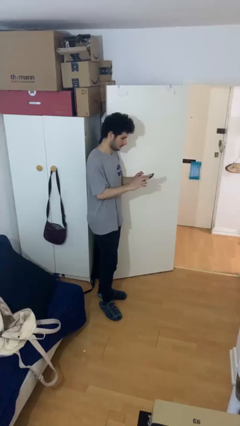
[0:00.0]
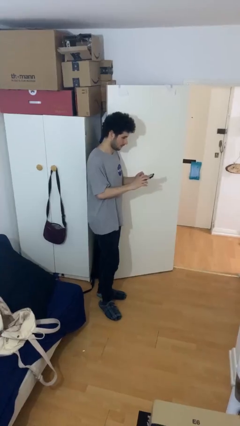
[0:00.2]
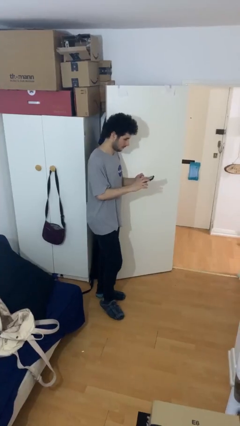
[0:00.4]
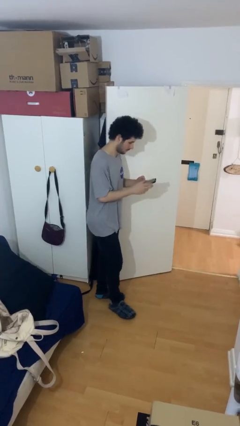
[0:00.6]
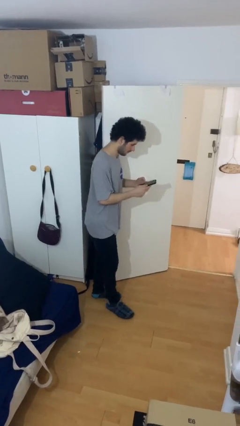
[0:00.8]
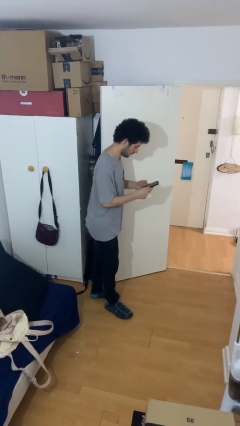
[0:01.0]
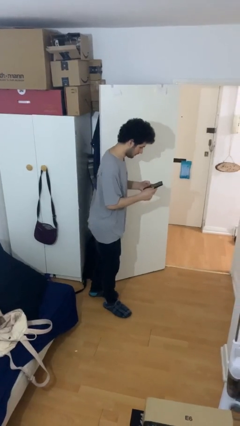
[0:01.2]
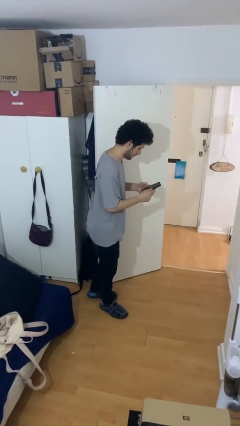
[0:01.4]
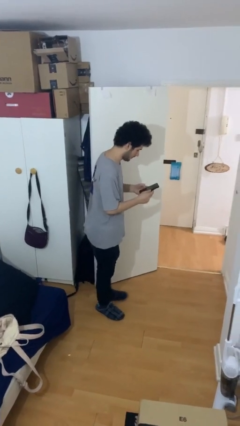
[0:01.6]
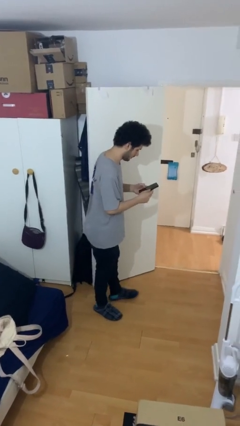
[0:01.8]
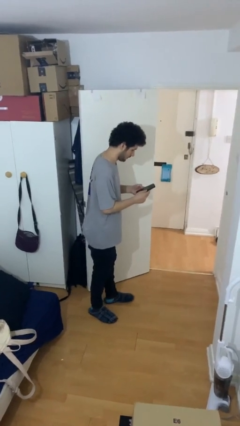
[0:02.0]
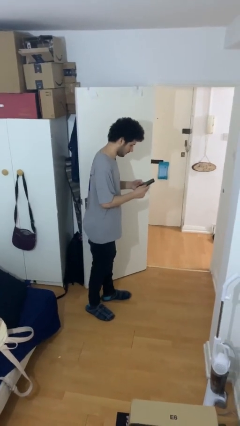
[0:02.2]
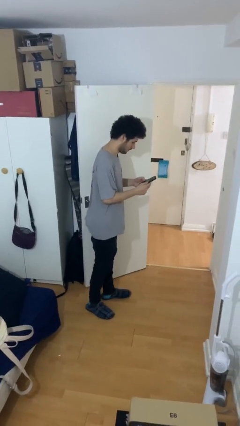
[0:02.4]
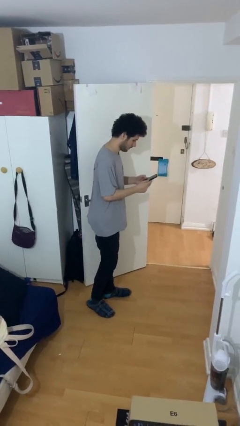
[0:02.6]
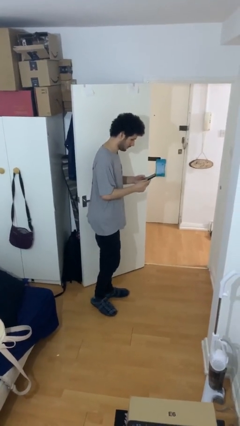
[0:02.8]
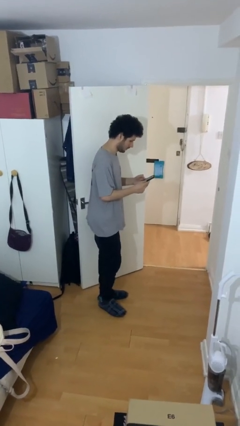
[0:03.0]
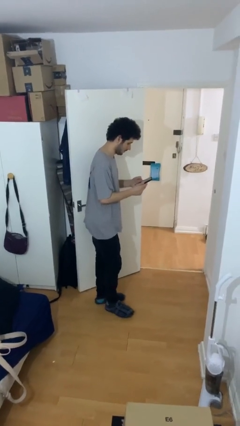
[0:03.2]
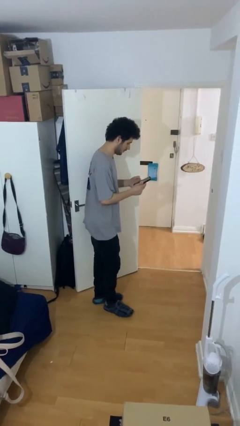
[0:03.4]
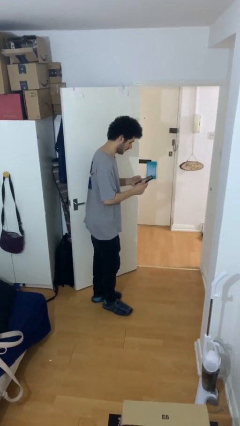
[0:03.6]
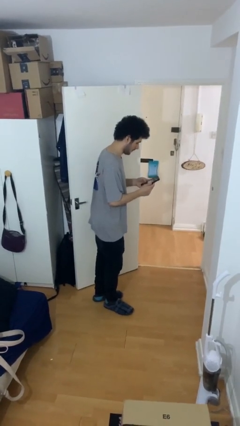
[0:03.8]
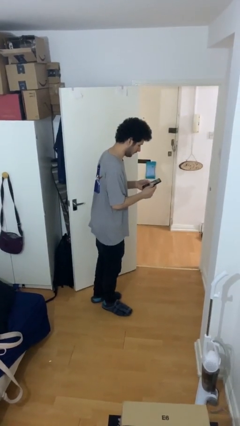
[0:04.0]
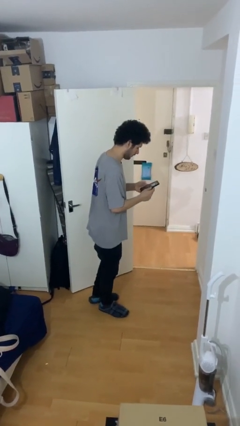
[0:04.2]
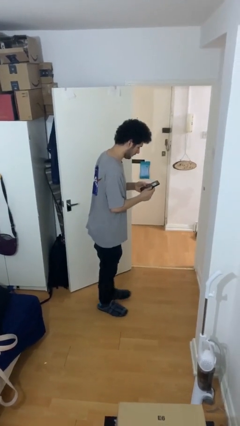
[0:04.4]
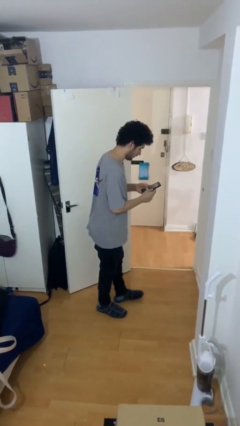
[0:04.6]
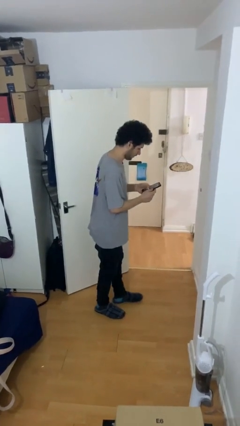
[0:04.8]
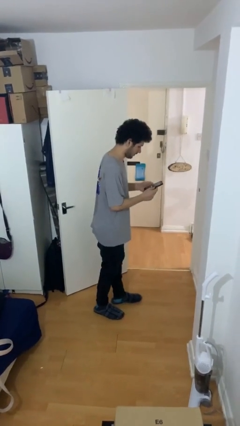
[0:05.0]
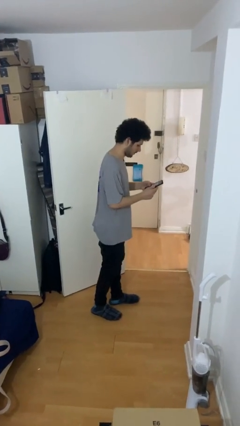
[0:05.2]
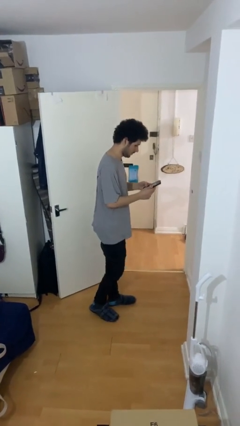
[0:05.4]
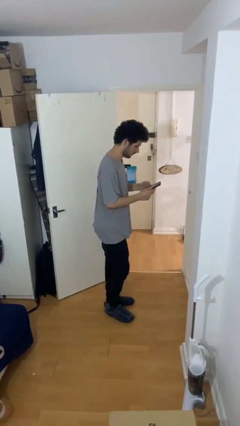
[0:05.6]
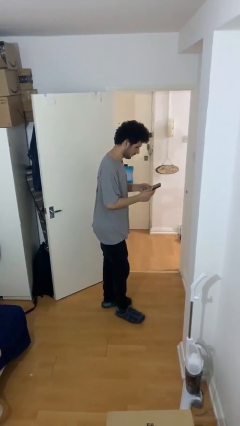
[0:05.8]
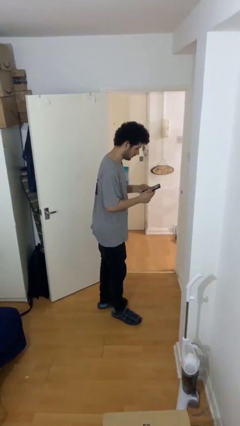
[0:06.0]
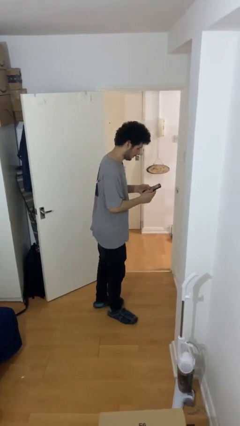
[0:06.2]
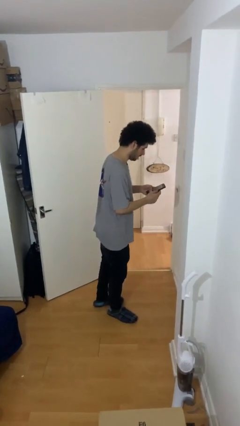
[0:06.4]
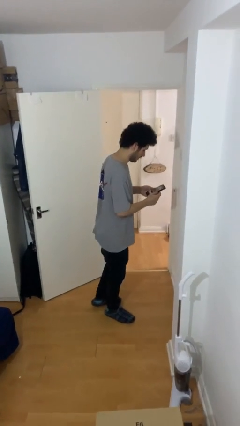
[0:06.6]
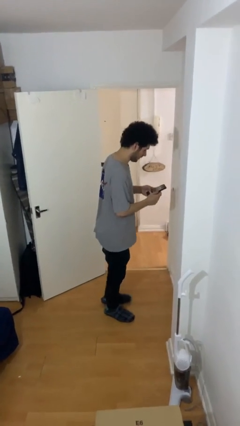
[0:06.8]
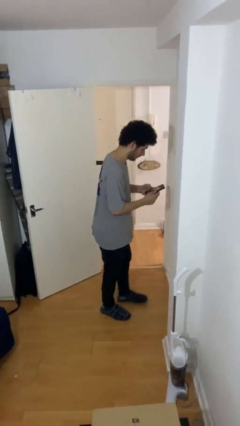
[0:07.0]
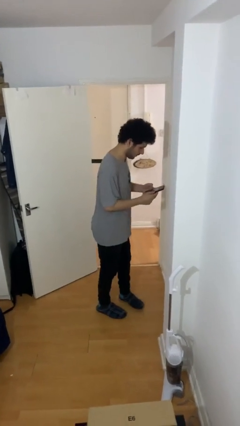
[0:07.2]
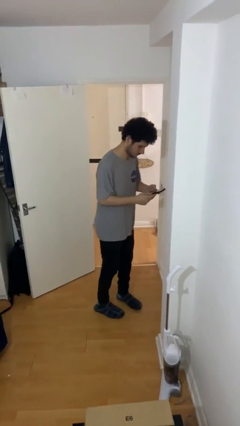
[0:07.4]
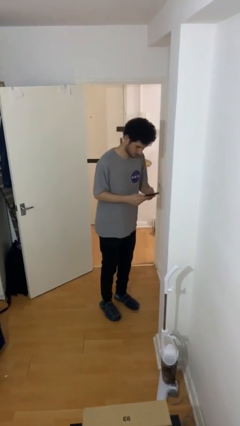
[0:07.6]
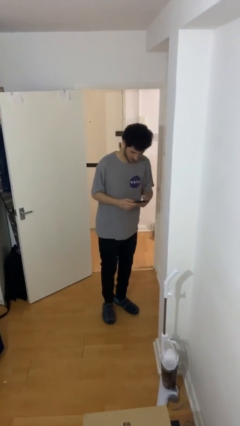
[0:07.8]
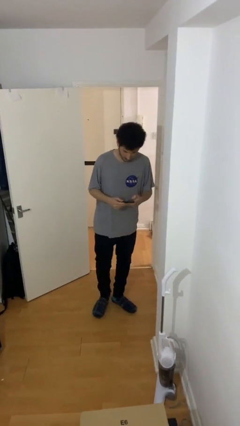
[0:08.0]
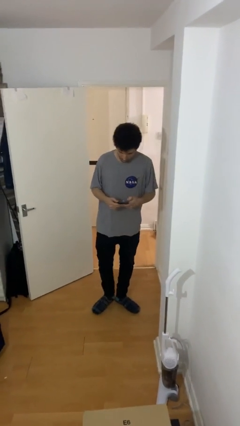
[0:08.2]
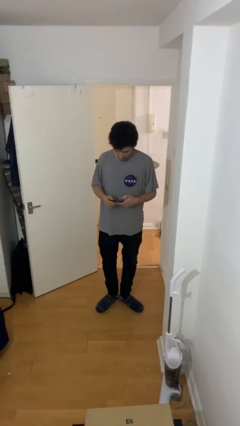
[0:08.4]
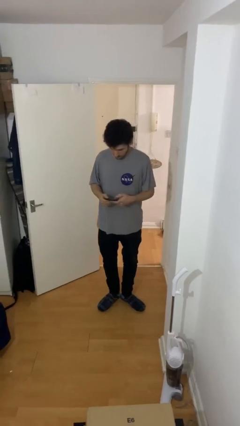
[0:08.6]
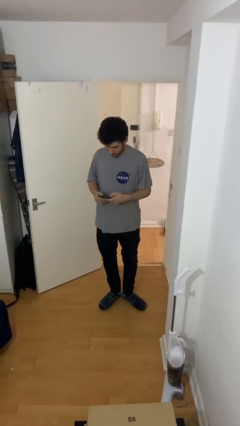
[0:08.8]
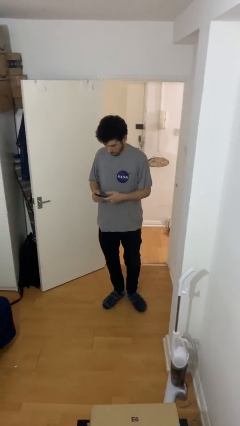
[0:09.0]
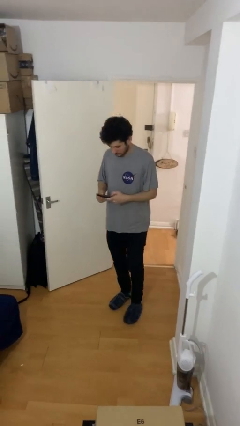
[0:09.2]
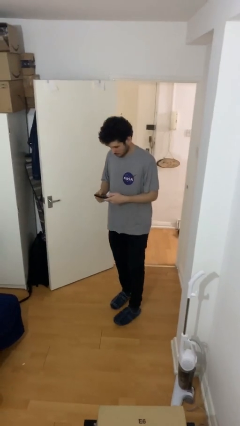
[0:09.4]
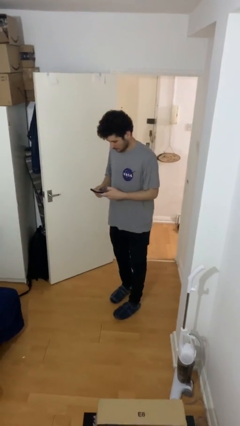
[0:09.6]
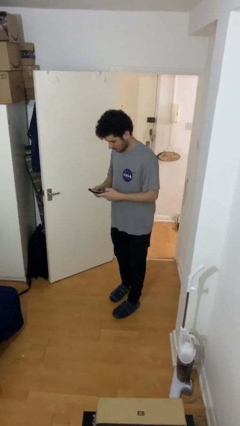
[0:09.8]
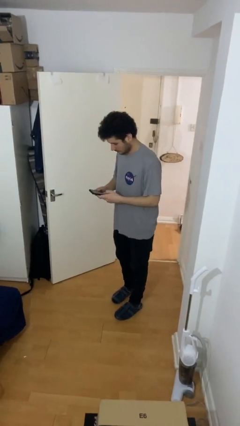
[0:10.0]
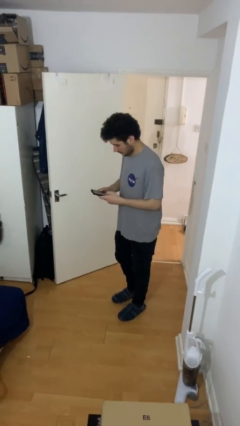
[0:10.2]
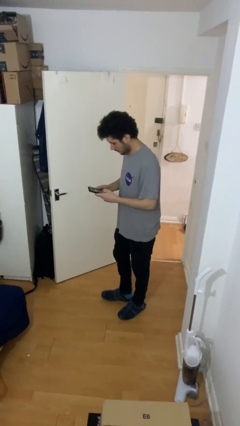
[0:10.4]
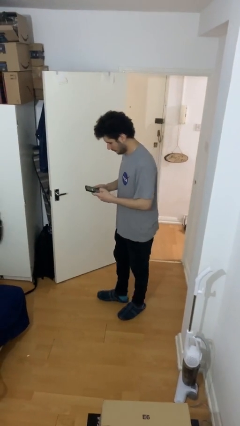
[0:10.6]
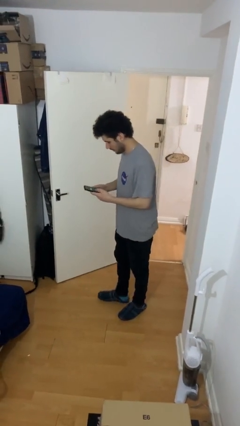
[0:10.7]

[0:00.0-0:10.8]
person texts on phone

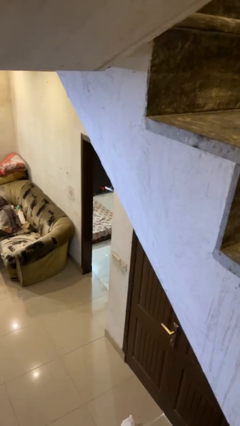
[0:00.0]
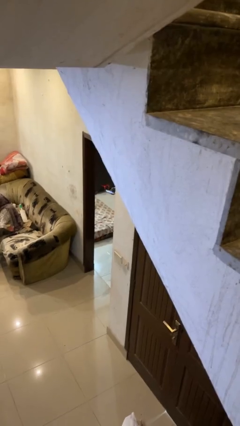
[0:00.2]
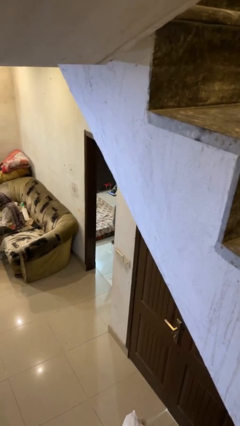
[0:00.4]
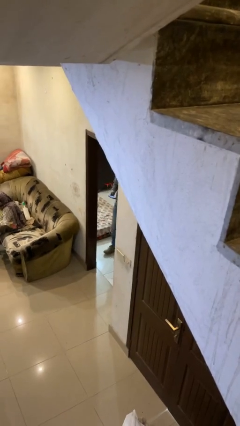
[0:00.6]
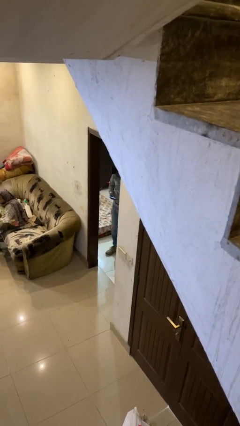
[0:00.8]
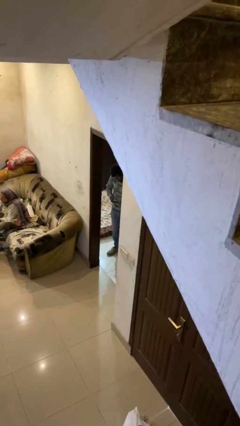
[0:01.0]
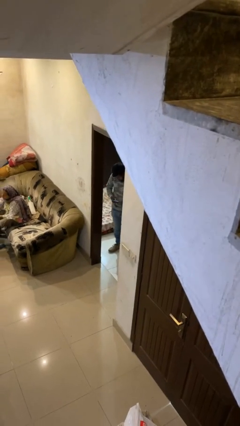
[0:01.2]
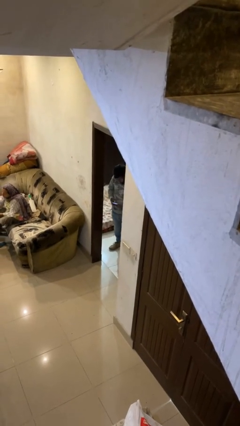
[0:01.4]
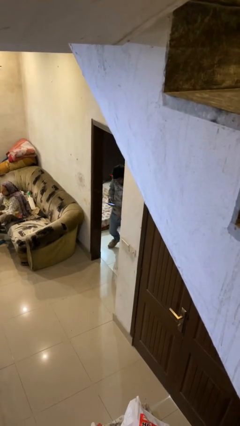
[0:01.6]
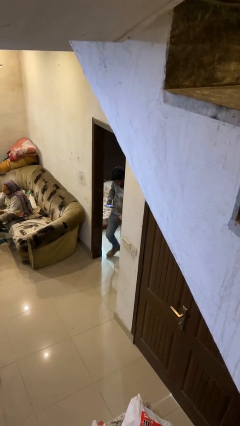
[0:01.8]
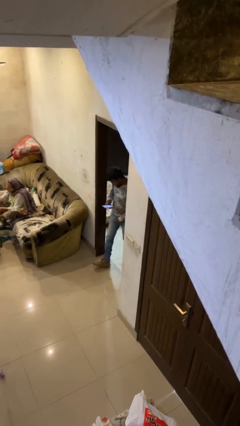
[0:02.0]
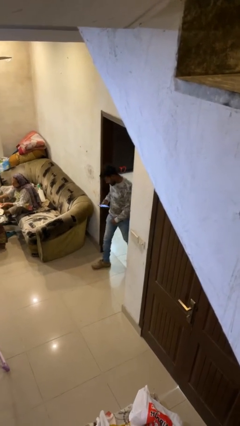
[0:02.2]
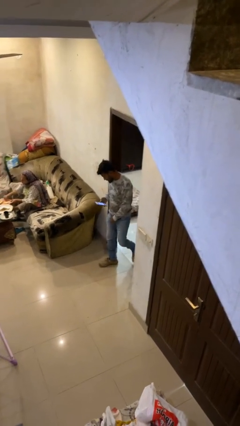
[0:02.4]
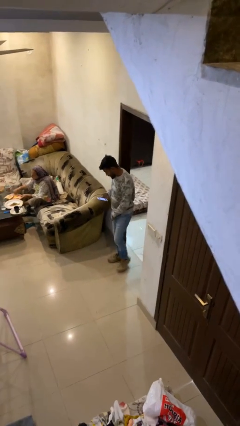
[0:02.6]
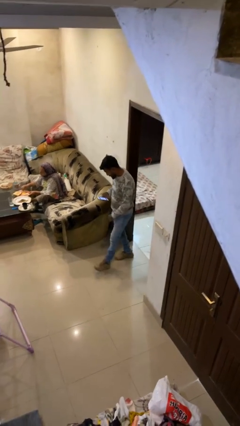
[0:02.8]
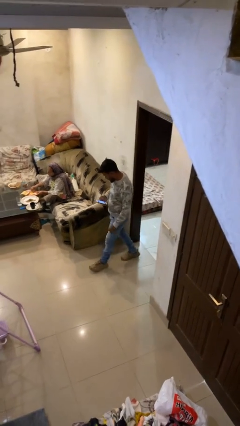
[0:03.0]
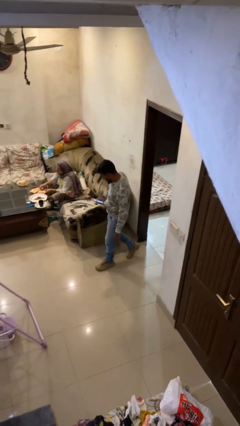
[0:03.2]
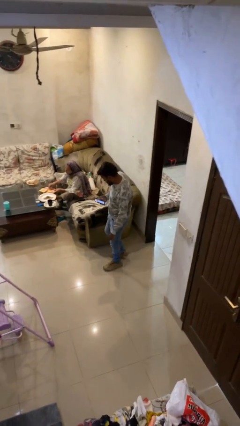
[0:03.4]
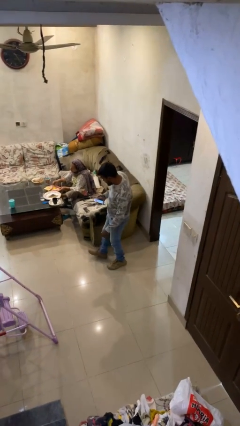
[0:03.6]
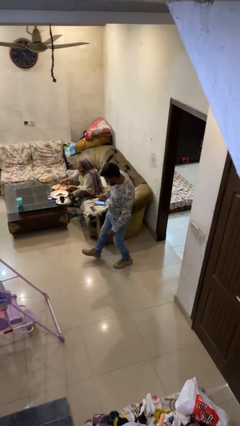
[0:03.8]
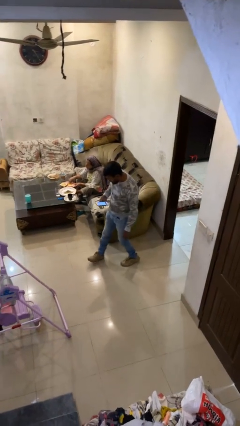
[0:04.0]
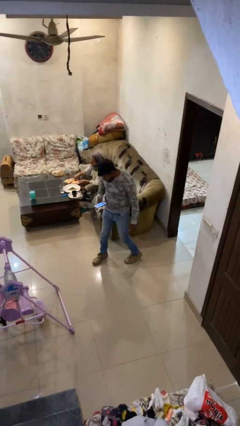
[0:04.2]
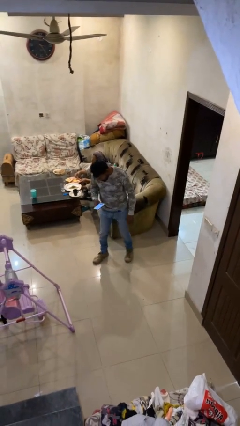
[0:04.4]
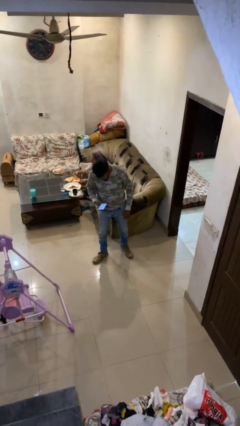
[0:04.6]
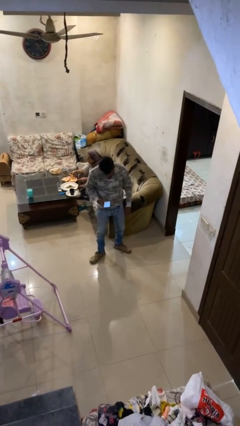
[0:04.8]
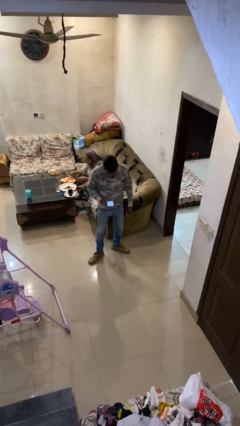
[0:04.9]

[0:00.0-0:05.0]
person enters scene through structure

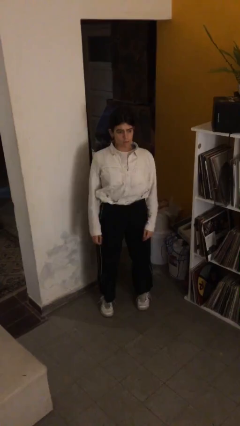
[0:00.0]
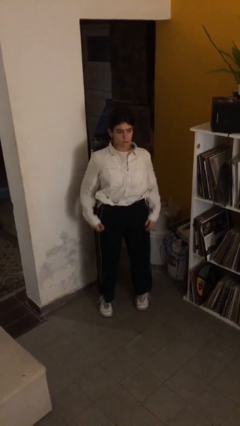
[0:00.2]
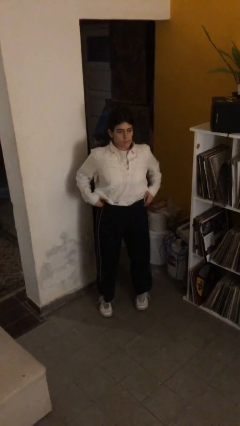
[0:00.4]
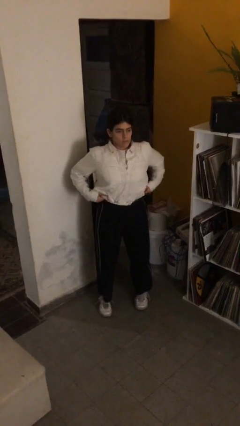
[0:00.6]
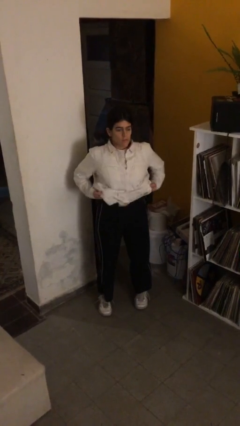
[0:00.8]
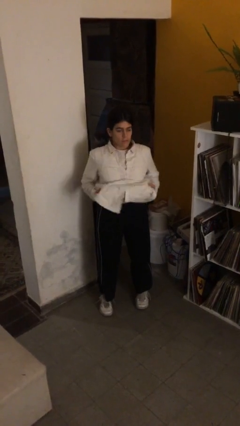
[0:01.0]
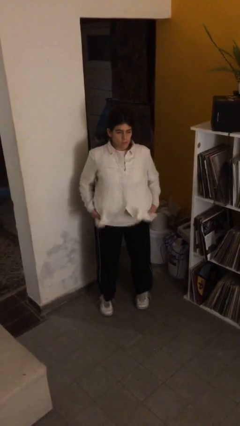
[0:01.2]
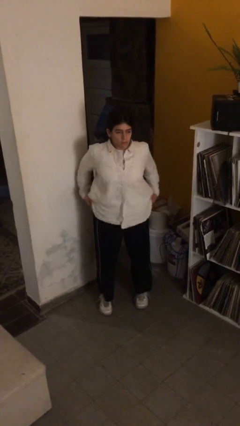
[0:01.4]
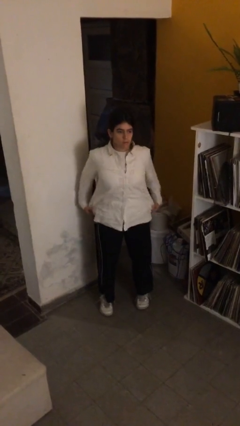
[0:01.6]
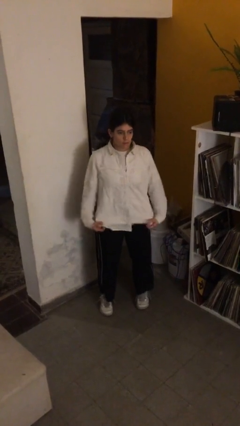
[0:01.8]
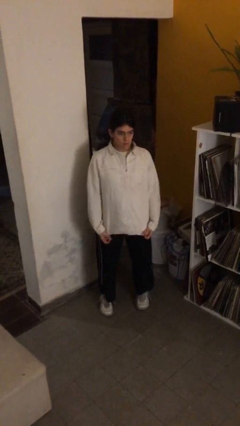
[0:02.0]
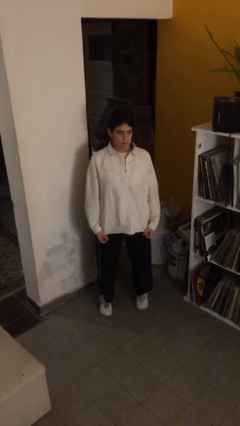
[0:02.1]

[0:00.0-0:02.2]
person untucks shirt
